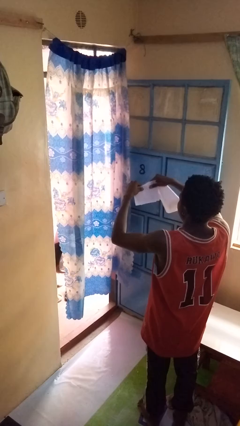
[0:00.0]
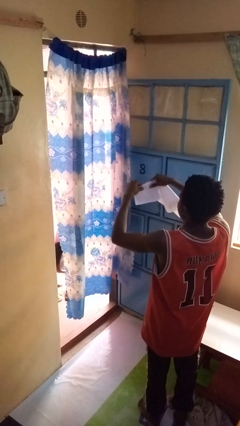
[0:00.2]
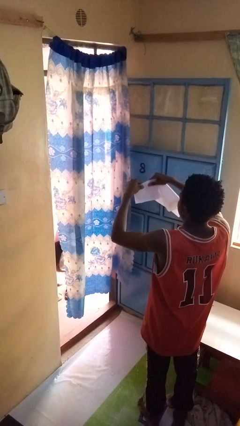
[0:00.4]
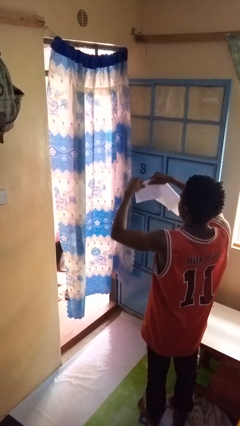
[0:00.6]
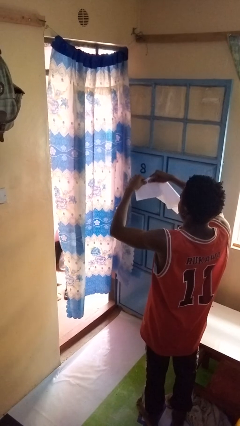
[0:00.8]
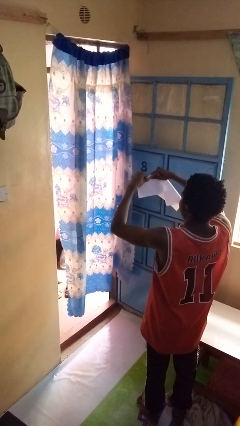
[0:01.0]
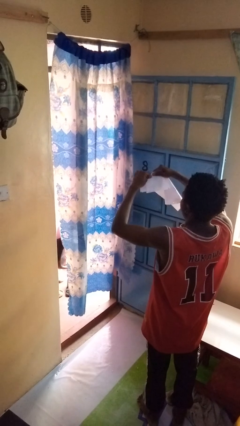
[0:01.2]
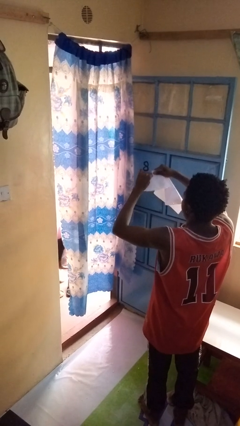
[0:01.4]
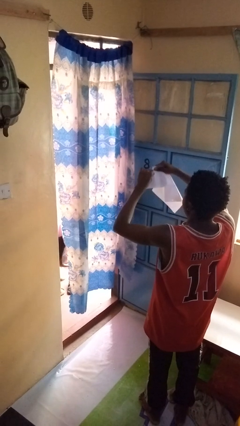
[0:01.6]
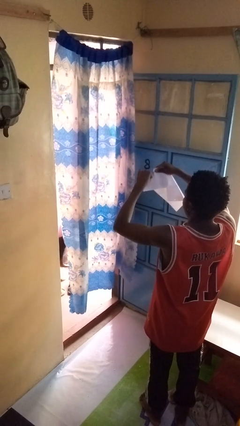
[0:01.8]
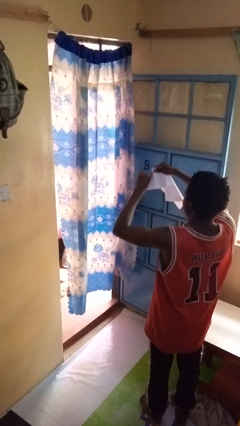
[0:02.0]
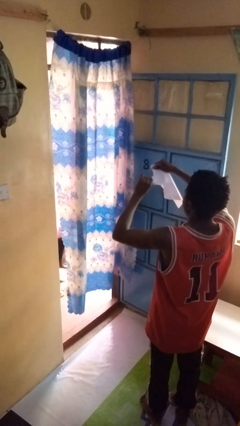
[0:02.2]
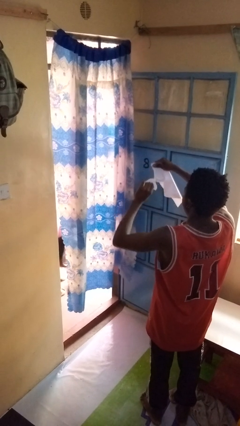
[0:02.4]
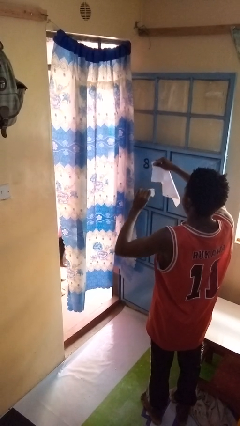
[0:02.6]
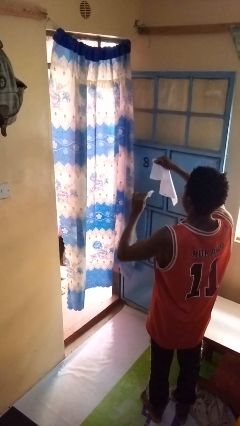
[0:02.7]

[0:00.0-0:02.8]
person tears paper

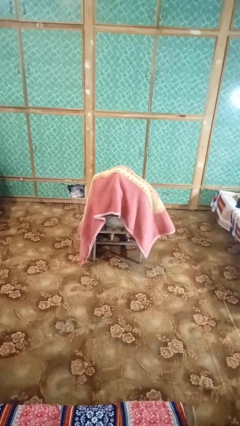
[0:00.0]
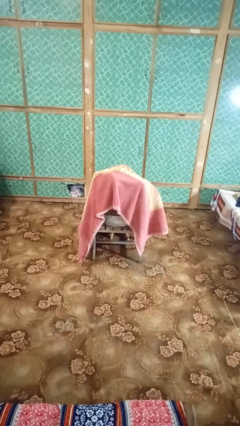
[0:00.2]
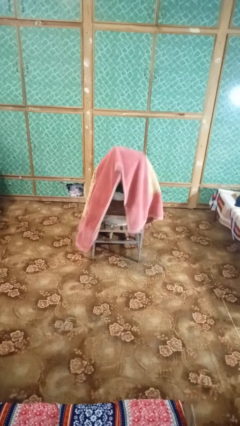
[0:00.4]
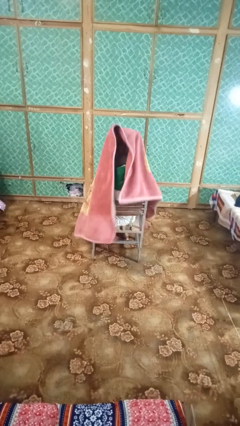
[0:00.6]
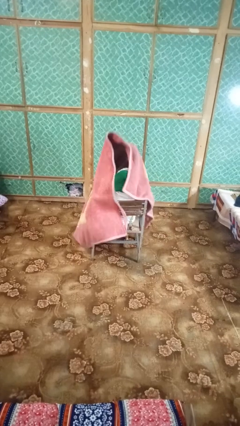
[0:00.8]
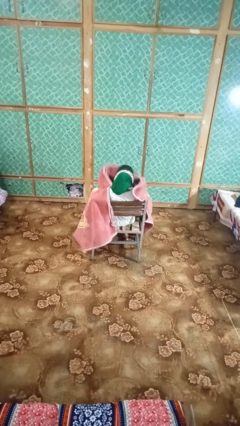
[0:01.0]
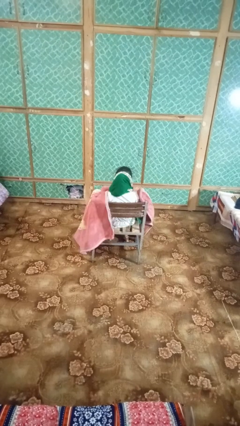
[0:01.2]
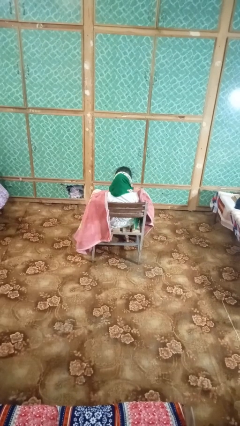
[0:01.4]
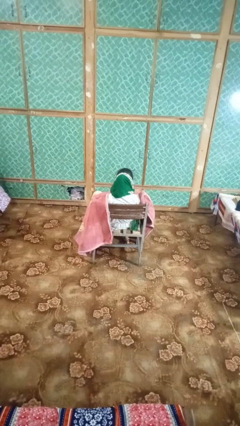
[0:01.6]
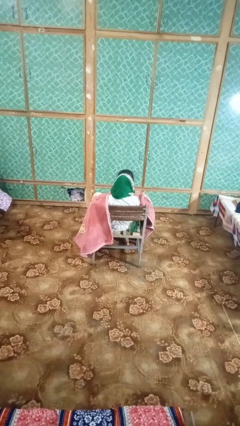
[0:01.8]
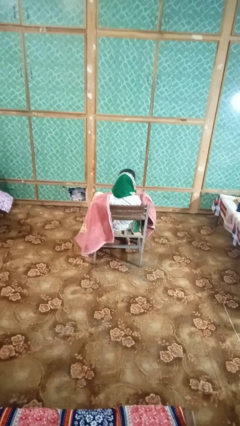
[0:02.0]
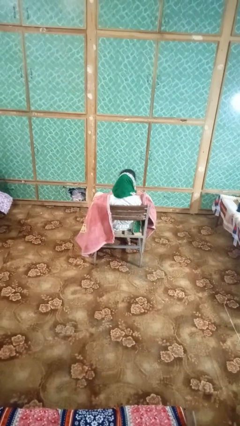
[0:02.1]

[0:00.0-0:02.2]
person uncovers with blanket

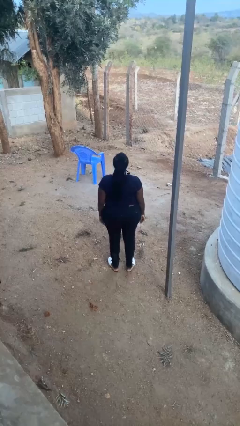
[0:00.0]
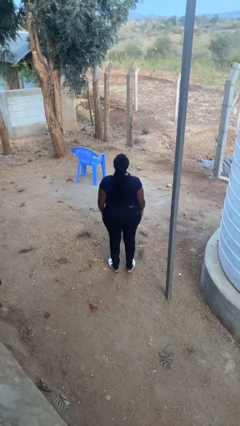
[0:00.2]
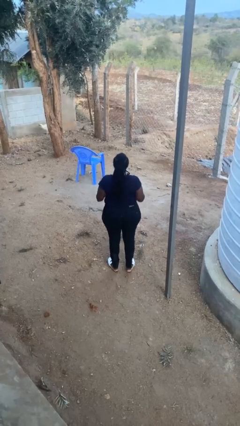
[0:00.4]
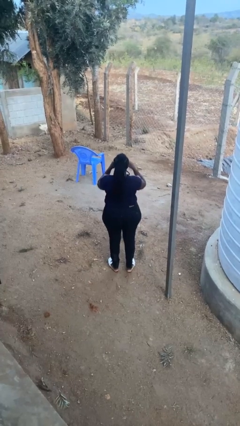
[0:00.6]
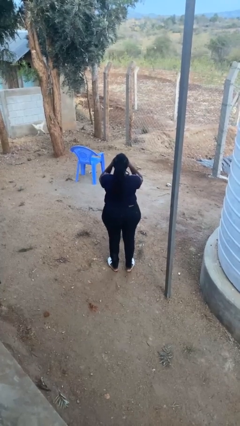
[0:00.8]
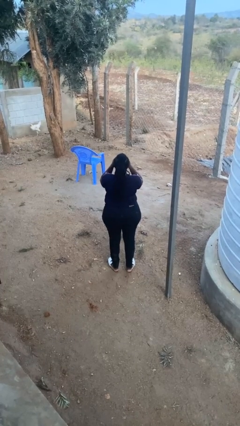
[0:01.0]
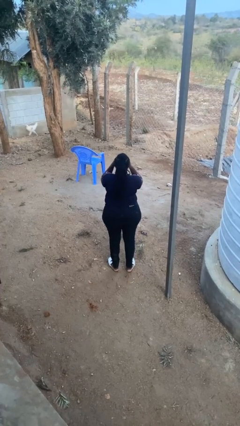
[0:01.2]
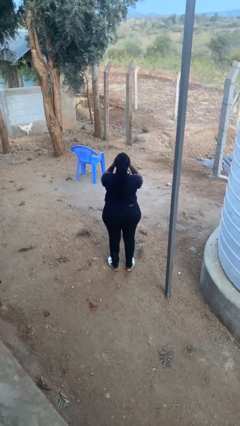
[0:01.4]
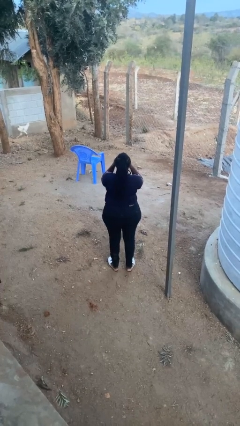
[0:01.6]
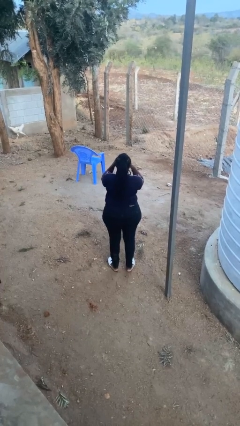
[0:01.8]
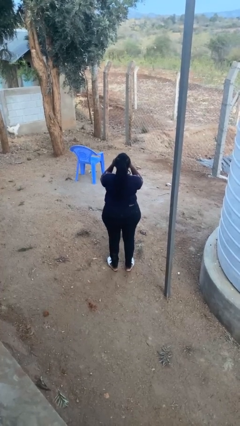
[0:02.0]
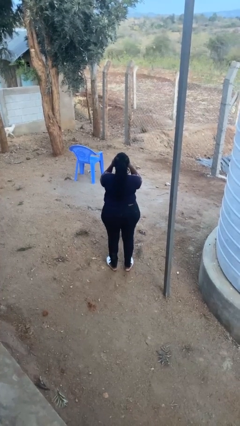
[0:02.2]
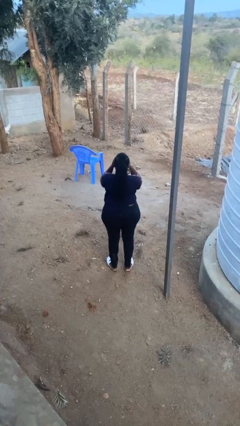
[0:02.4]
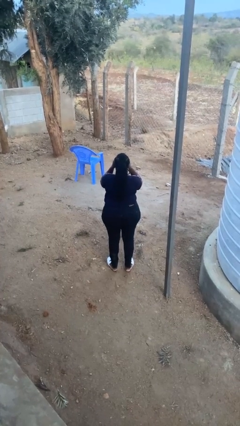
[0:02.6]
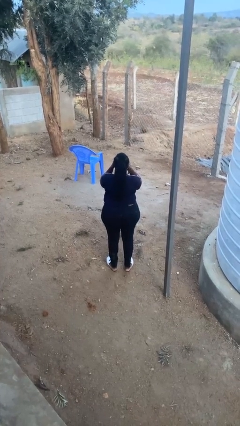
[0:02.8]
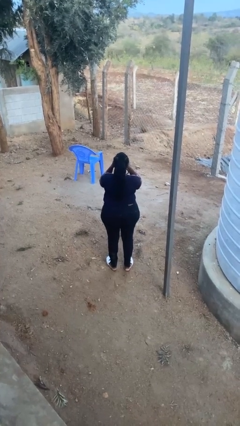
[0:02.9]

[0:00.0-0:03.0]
person rubs eyes

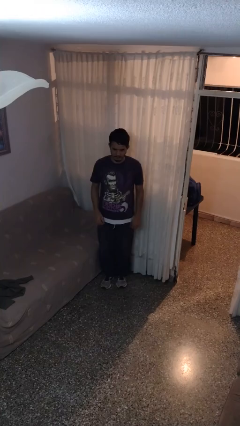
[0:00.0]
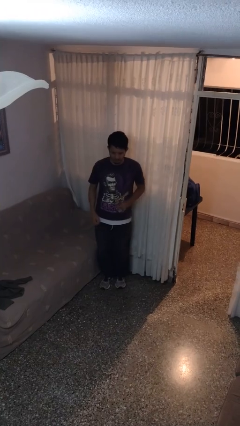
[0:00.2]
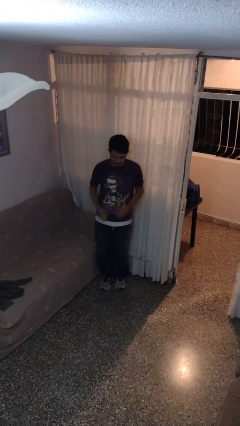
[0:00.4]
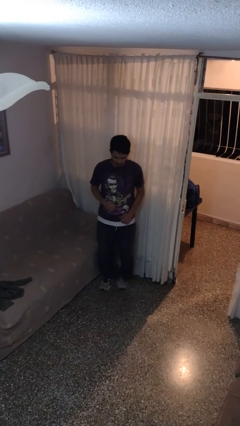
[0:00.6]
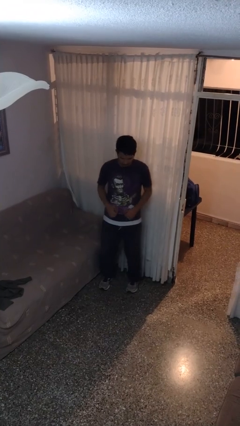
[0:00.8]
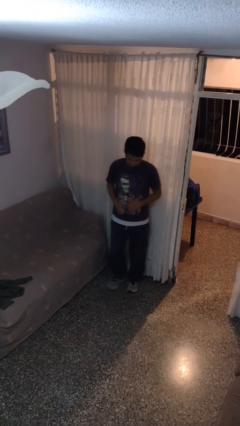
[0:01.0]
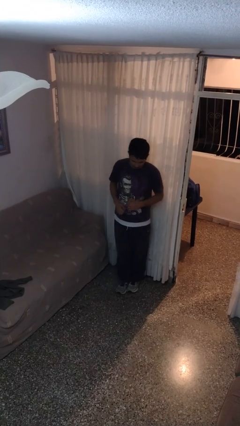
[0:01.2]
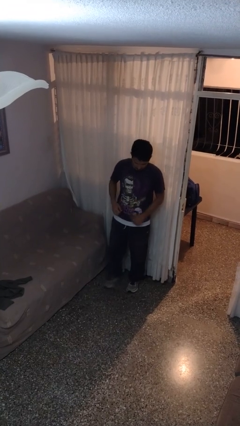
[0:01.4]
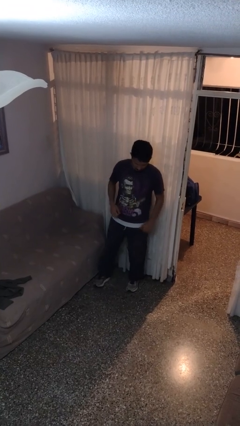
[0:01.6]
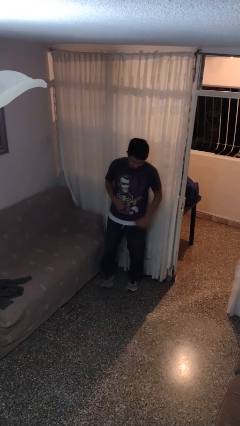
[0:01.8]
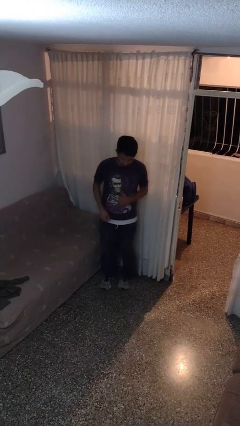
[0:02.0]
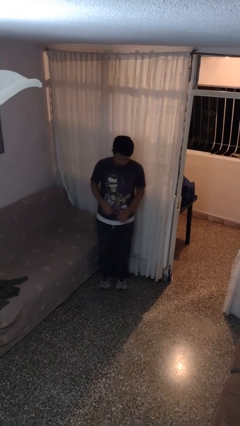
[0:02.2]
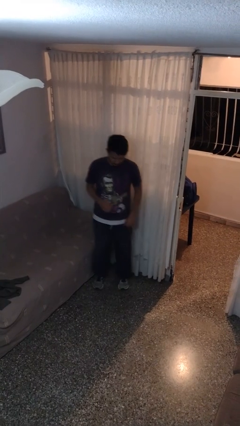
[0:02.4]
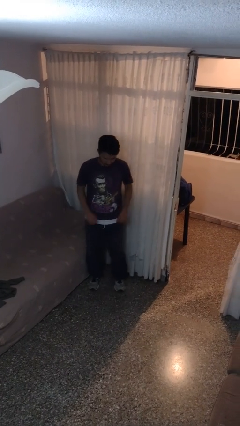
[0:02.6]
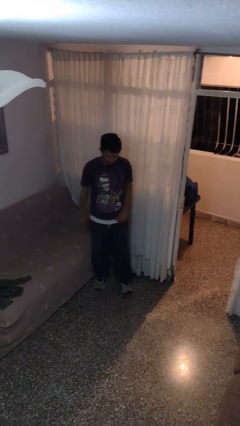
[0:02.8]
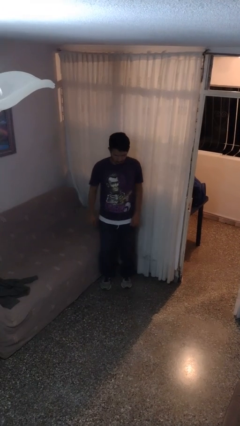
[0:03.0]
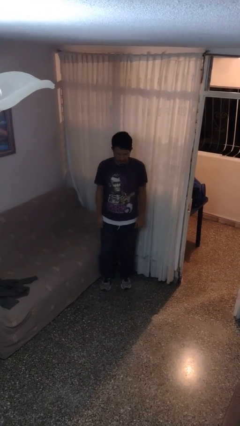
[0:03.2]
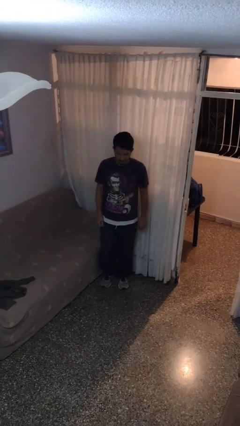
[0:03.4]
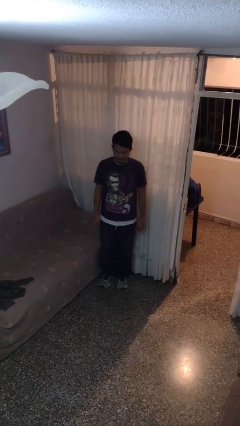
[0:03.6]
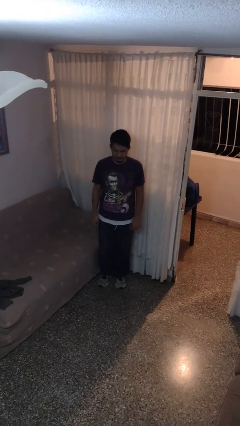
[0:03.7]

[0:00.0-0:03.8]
person dances in place

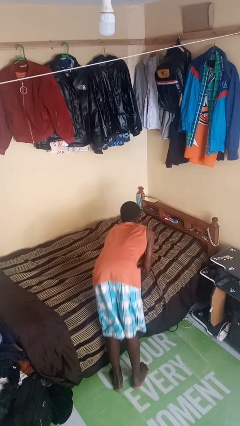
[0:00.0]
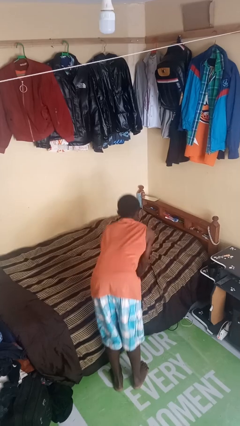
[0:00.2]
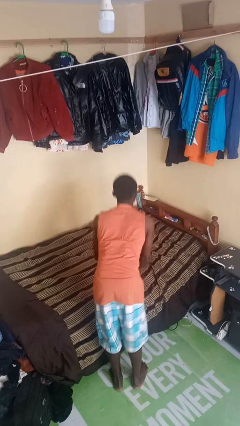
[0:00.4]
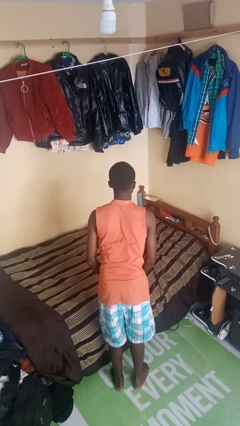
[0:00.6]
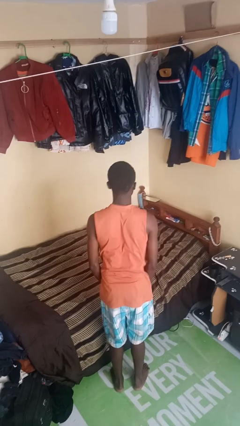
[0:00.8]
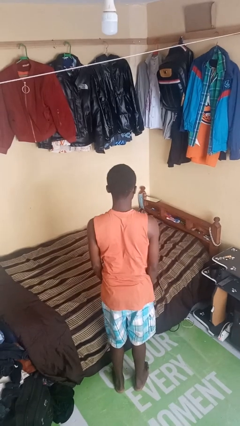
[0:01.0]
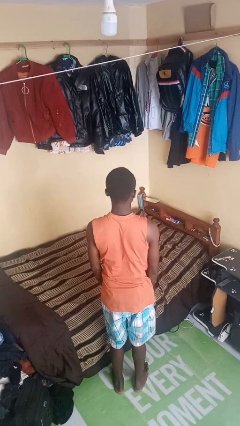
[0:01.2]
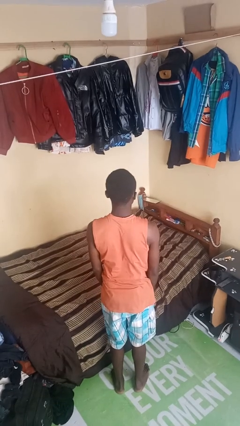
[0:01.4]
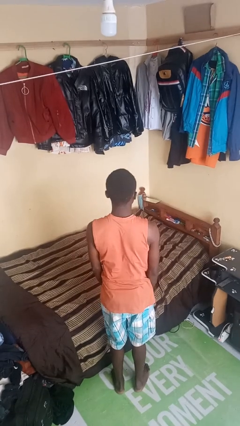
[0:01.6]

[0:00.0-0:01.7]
person stands up

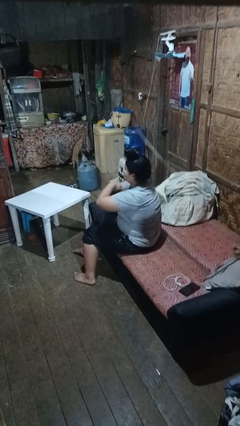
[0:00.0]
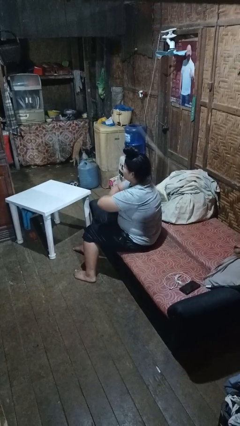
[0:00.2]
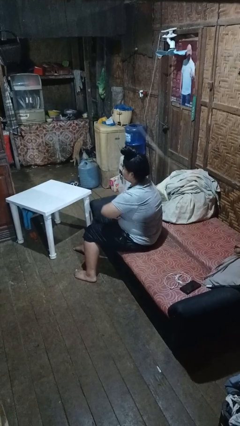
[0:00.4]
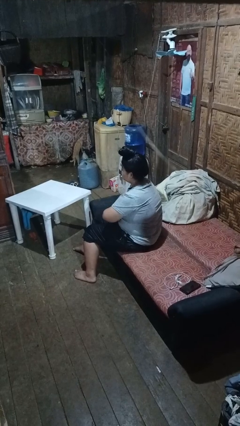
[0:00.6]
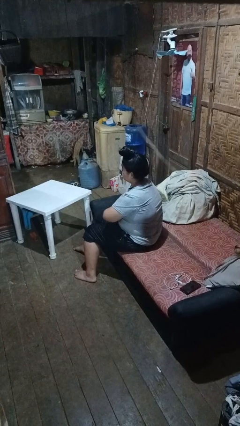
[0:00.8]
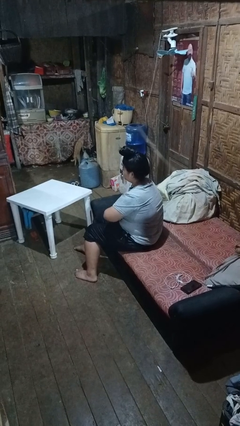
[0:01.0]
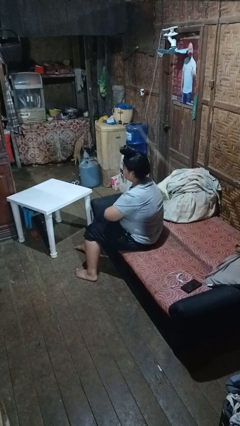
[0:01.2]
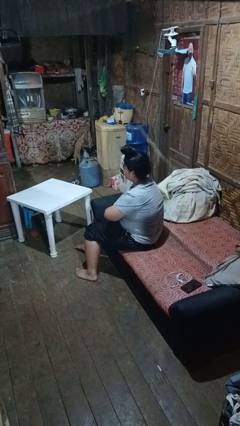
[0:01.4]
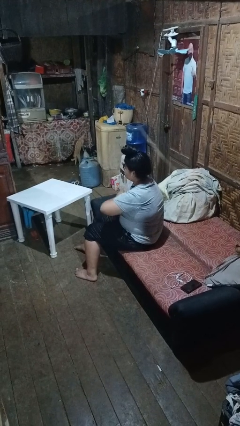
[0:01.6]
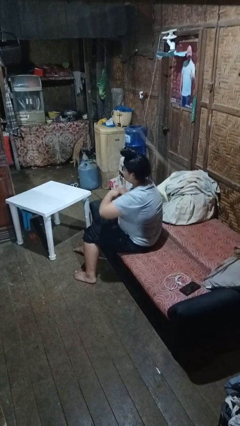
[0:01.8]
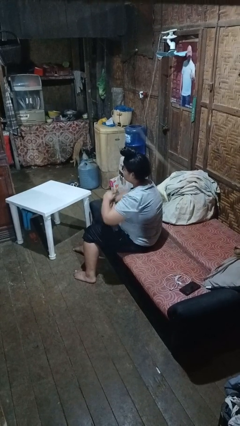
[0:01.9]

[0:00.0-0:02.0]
person crosses arms

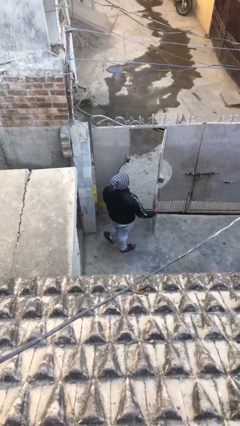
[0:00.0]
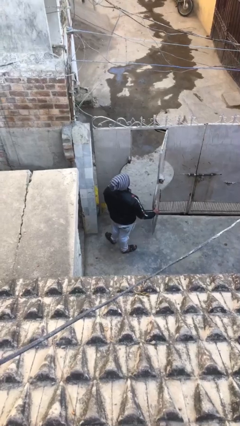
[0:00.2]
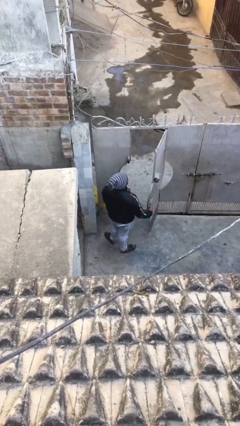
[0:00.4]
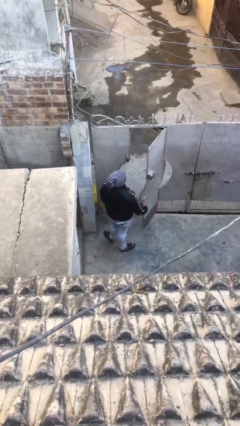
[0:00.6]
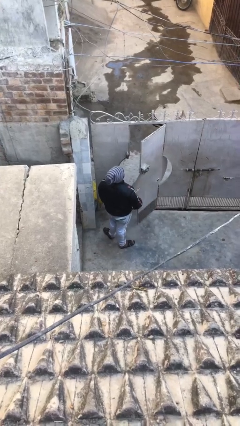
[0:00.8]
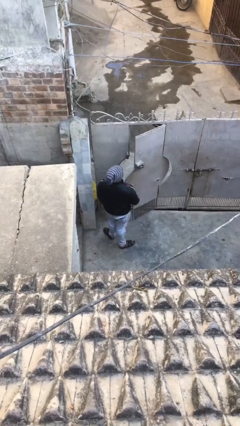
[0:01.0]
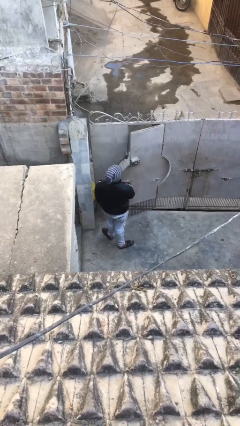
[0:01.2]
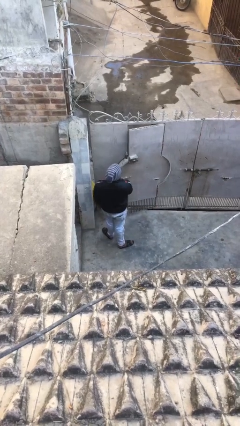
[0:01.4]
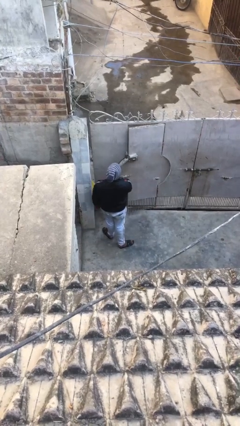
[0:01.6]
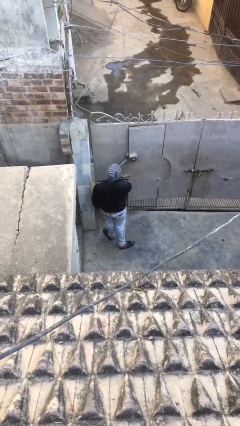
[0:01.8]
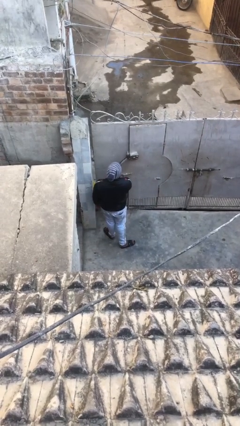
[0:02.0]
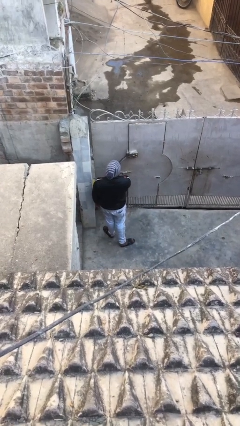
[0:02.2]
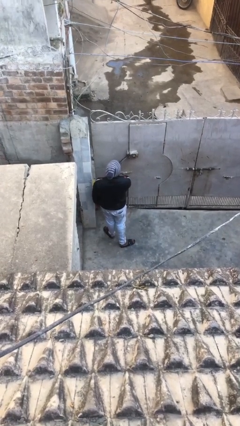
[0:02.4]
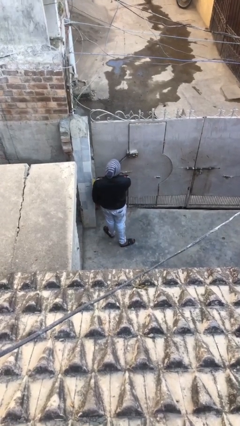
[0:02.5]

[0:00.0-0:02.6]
person closes facility door
